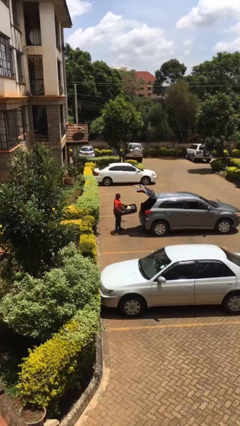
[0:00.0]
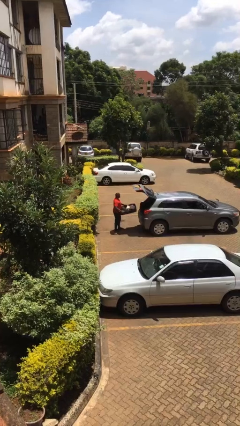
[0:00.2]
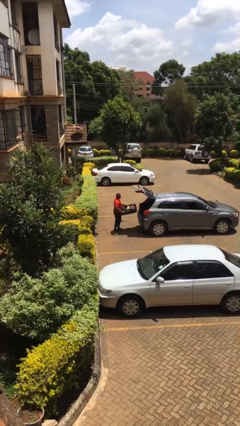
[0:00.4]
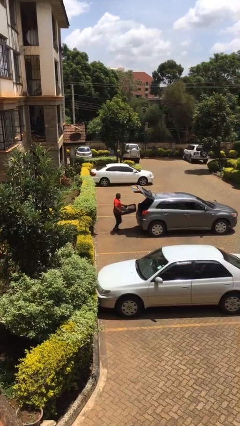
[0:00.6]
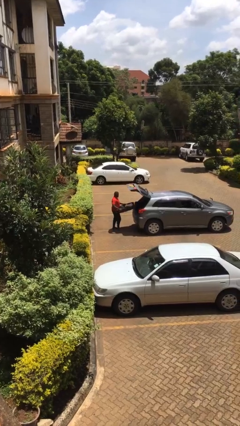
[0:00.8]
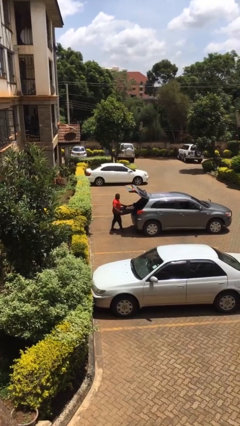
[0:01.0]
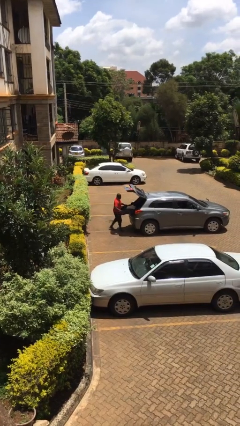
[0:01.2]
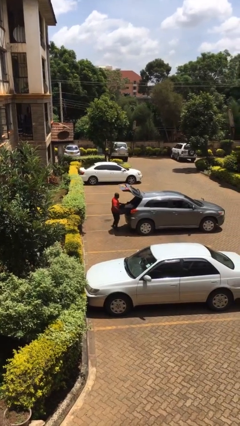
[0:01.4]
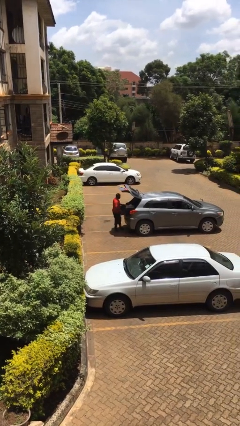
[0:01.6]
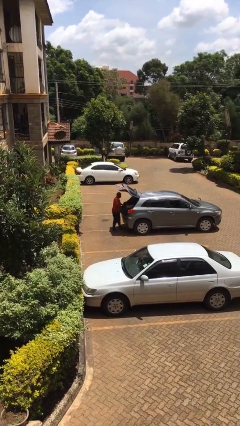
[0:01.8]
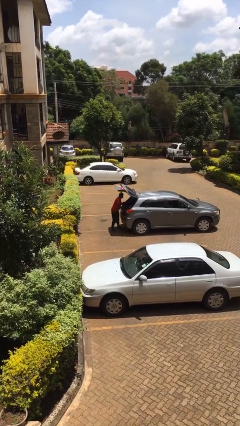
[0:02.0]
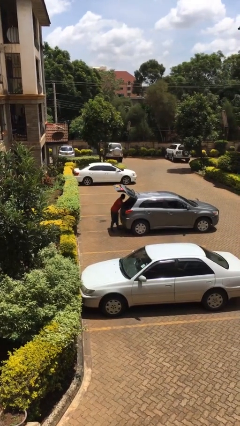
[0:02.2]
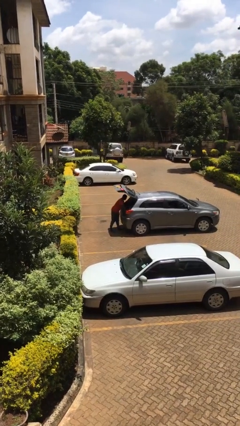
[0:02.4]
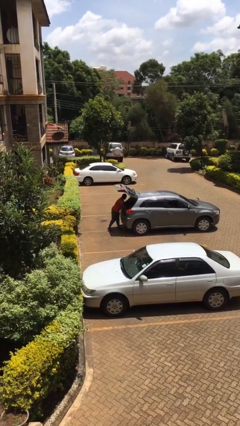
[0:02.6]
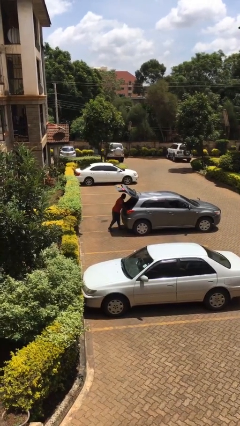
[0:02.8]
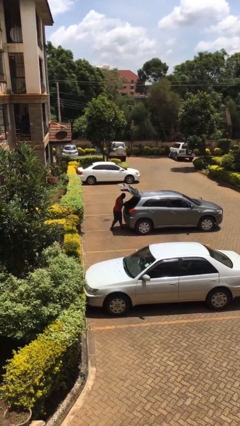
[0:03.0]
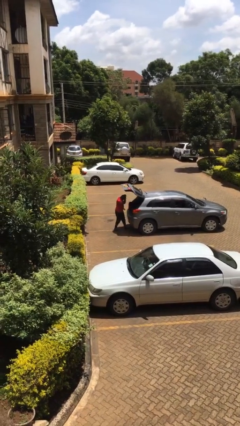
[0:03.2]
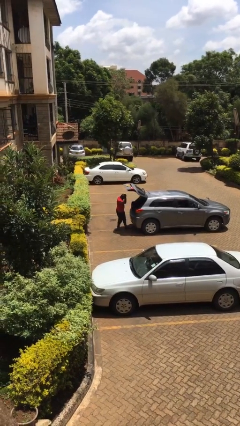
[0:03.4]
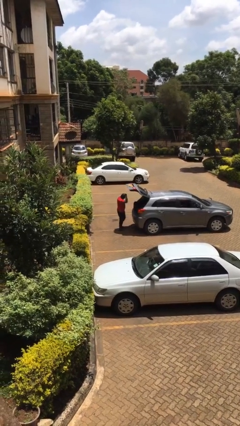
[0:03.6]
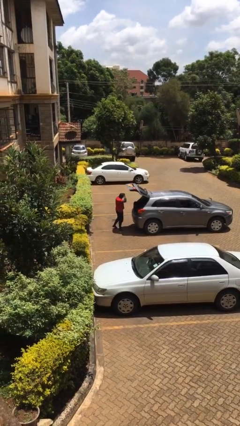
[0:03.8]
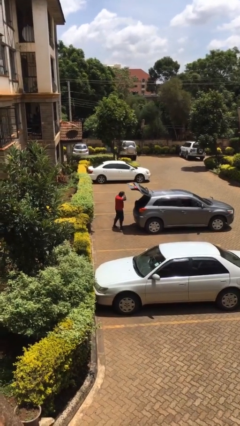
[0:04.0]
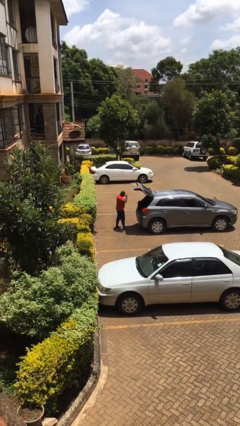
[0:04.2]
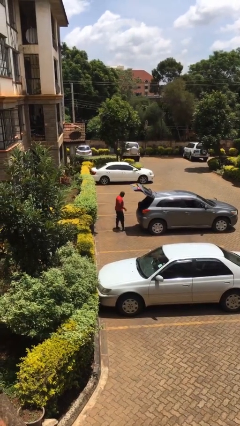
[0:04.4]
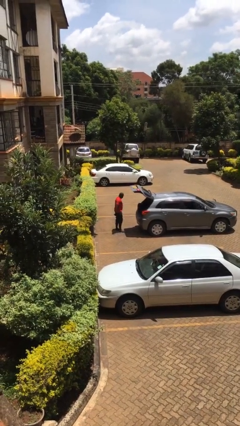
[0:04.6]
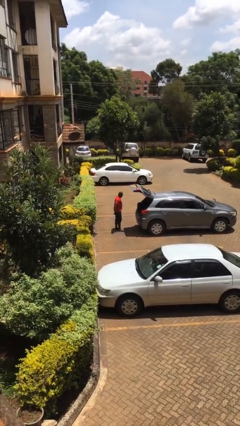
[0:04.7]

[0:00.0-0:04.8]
person loads car

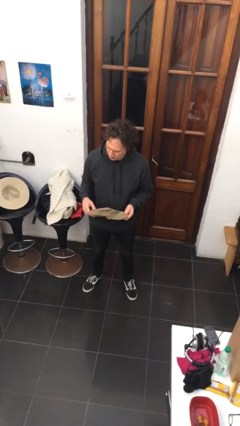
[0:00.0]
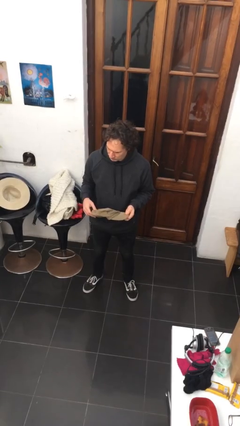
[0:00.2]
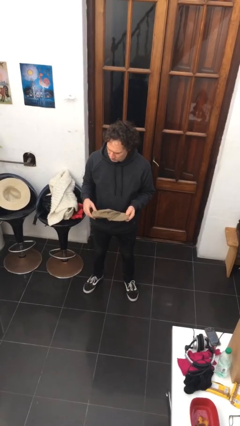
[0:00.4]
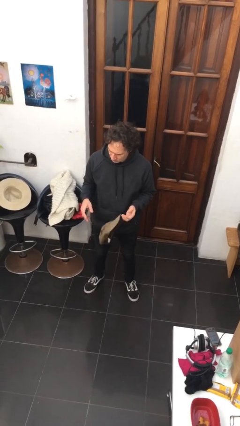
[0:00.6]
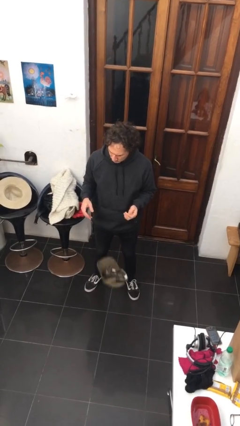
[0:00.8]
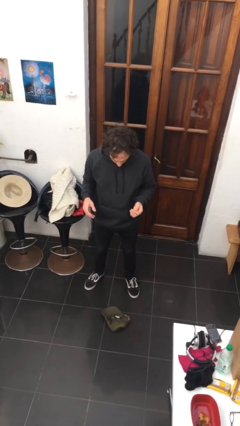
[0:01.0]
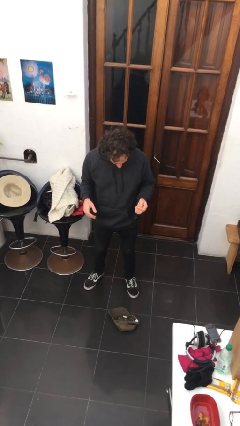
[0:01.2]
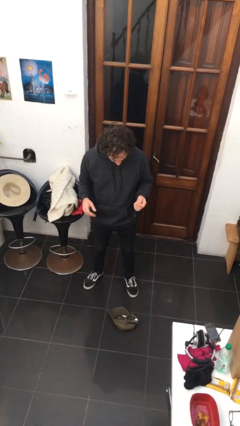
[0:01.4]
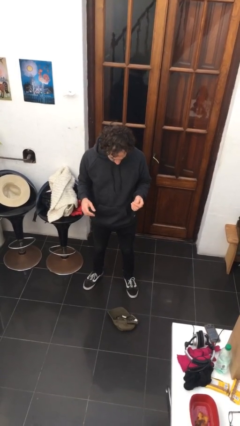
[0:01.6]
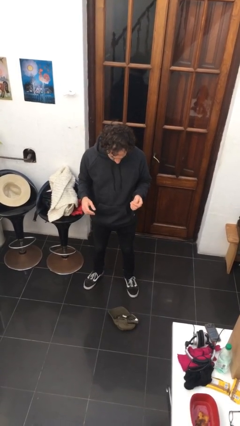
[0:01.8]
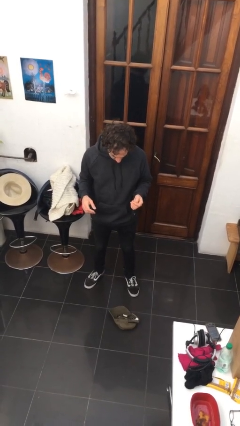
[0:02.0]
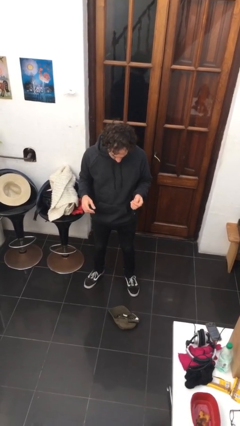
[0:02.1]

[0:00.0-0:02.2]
person drops object

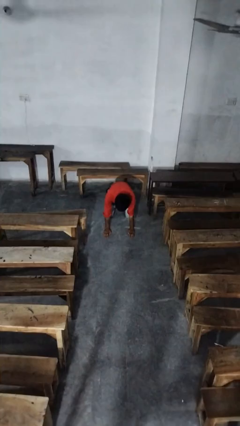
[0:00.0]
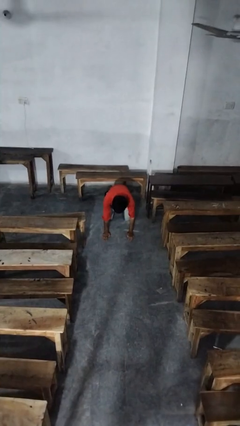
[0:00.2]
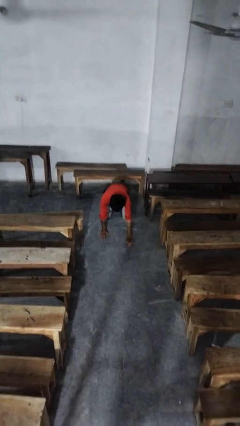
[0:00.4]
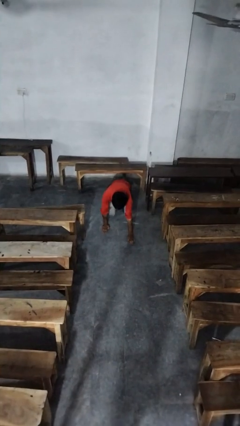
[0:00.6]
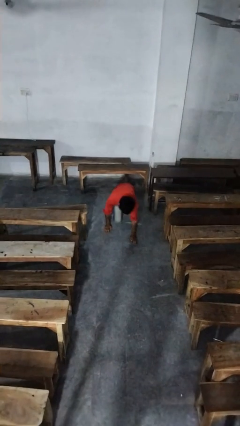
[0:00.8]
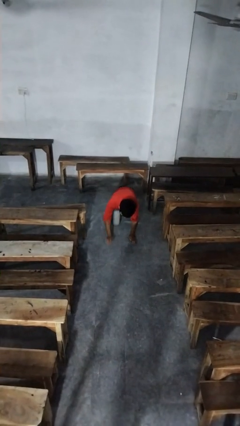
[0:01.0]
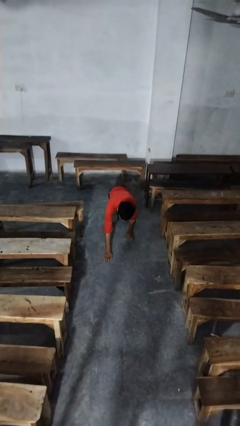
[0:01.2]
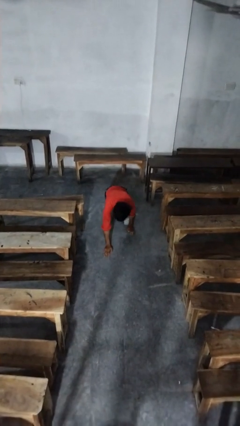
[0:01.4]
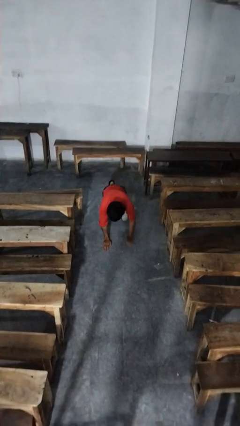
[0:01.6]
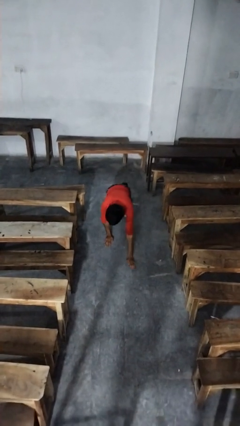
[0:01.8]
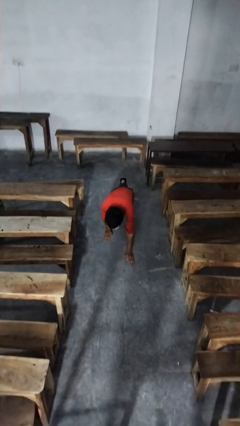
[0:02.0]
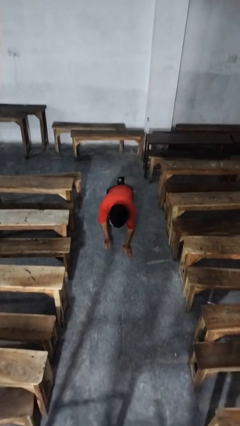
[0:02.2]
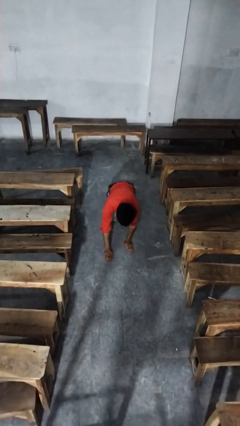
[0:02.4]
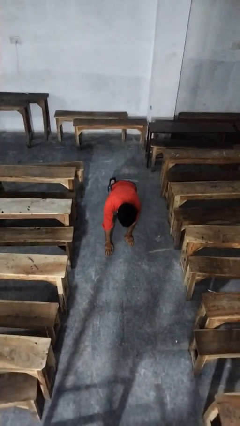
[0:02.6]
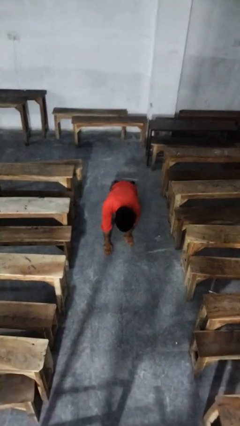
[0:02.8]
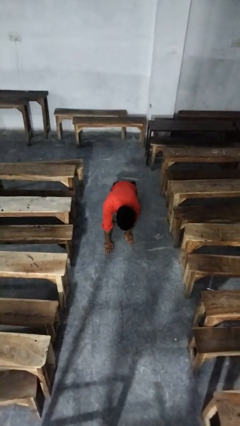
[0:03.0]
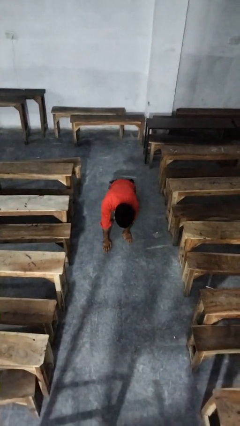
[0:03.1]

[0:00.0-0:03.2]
person crawls

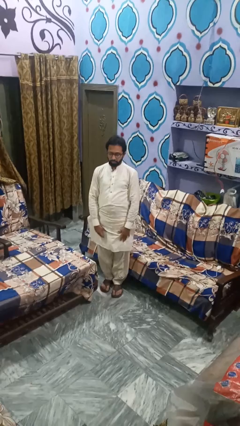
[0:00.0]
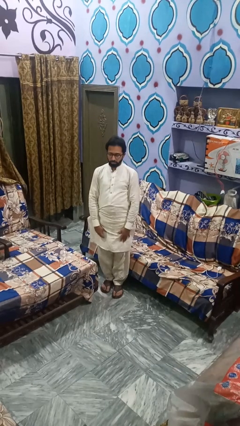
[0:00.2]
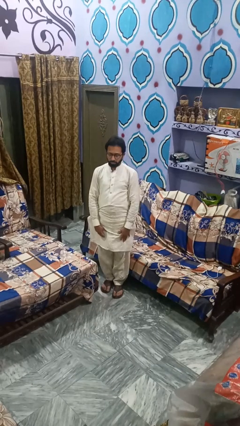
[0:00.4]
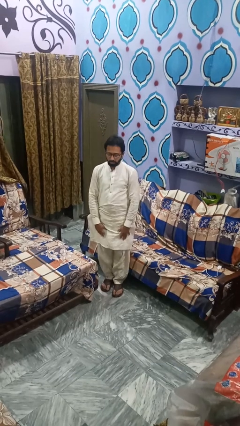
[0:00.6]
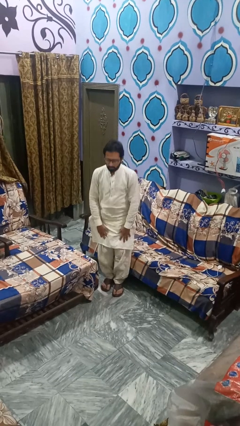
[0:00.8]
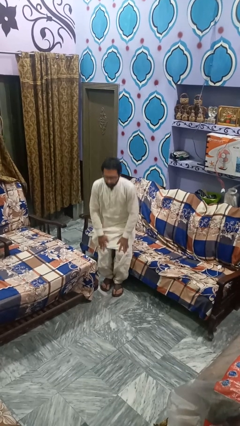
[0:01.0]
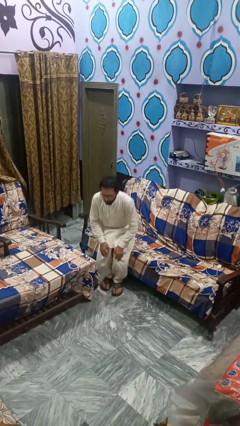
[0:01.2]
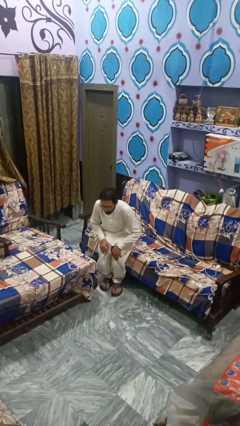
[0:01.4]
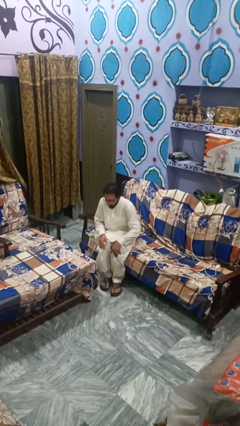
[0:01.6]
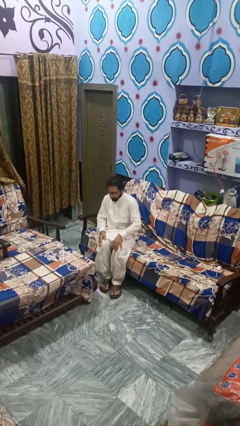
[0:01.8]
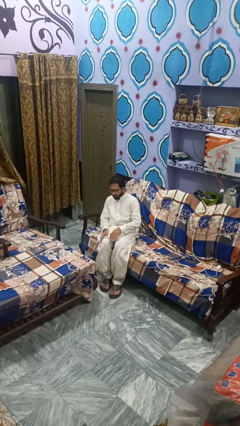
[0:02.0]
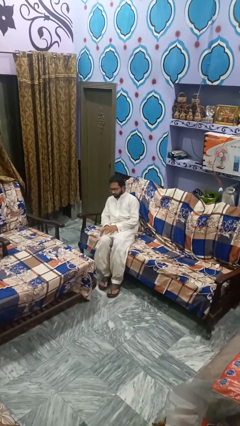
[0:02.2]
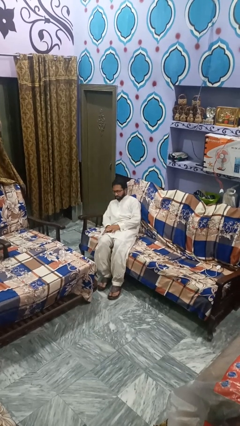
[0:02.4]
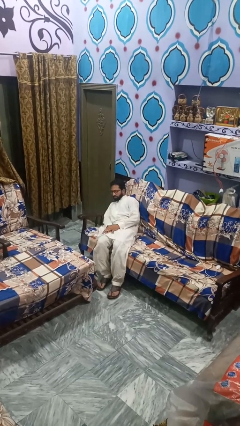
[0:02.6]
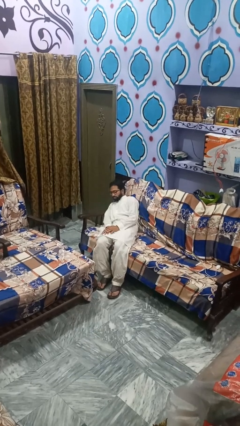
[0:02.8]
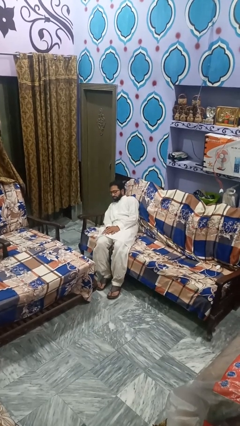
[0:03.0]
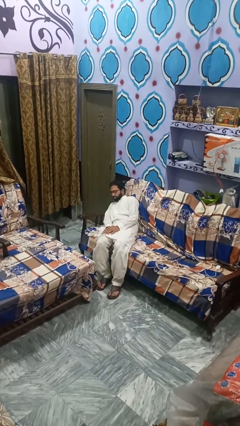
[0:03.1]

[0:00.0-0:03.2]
person lies down on couch

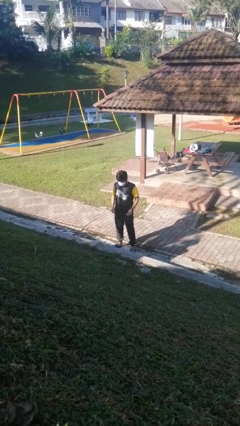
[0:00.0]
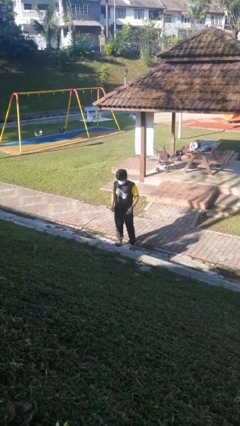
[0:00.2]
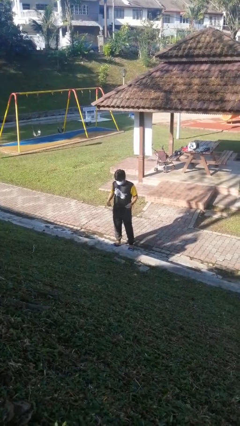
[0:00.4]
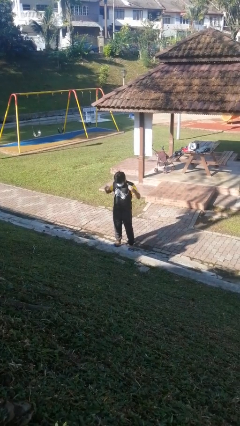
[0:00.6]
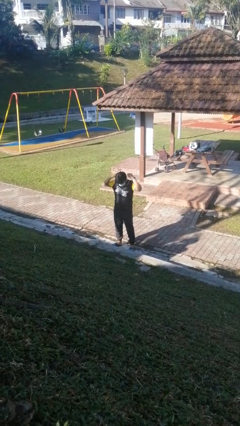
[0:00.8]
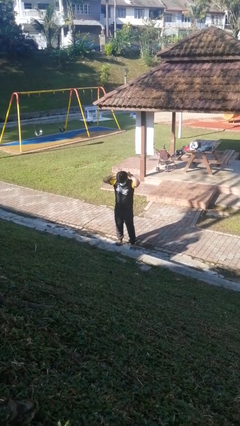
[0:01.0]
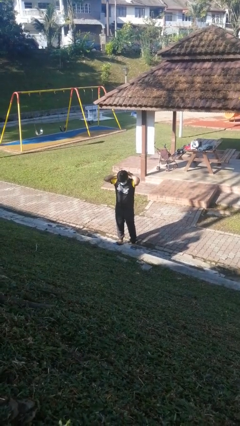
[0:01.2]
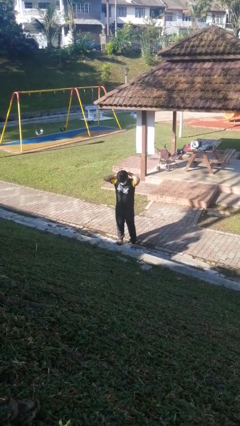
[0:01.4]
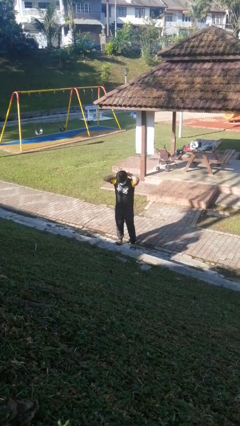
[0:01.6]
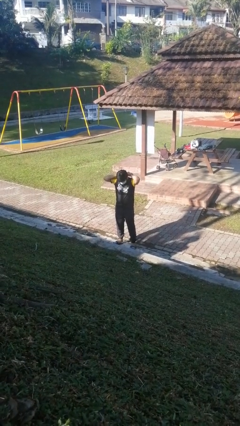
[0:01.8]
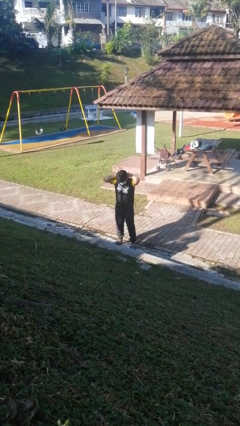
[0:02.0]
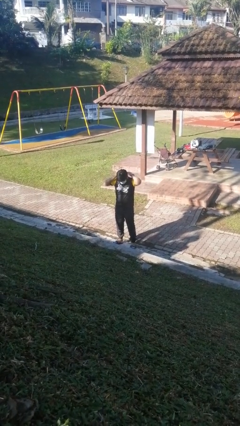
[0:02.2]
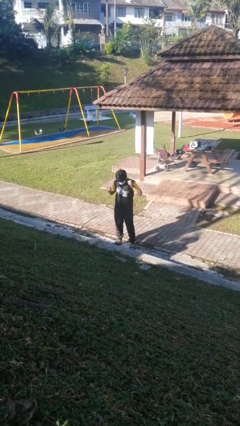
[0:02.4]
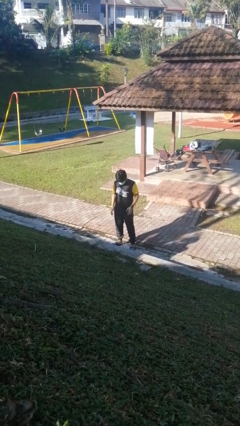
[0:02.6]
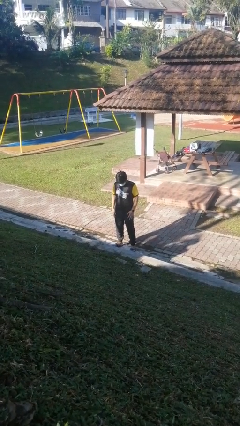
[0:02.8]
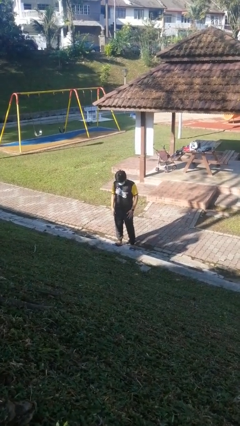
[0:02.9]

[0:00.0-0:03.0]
person puts on necklace

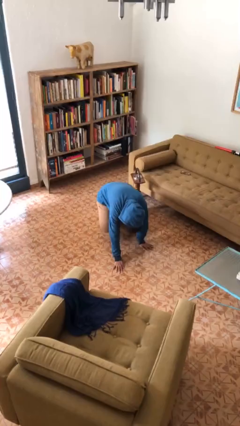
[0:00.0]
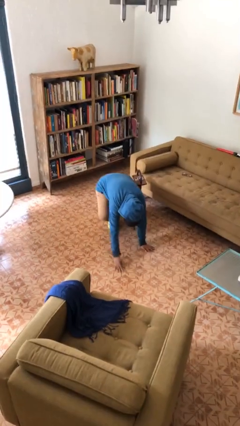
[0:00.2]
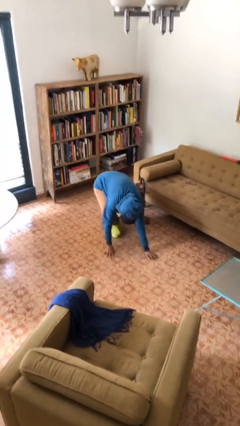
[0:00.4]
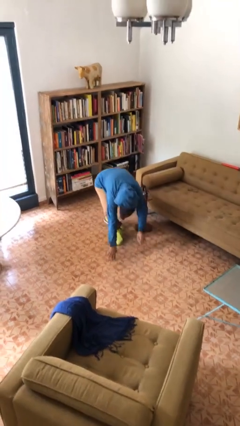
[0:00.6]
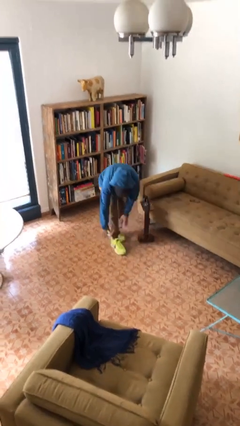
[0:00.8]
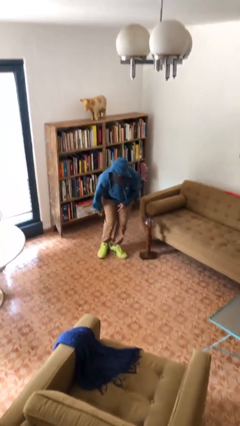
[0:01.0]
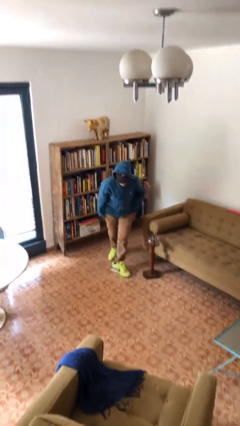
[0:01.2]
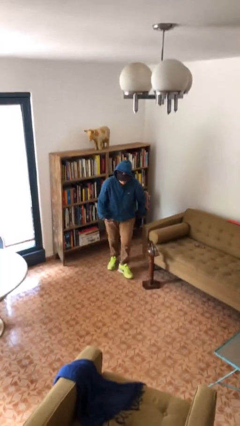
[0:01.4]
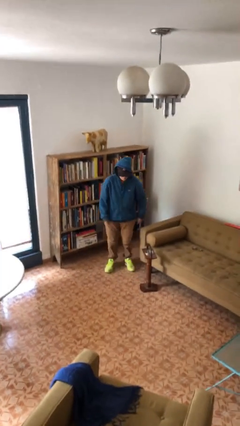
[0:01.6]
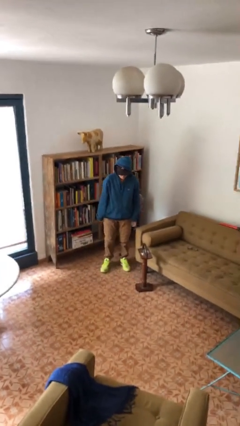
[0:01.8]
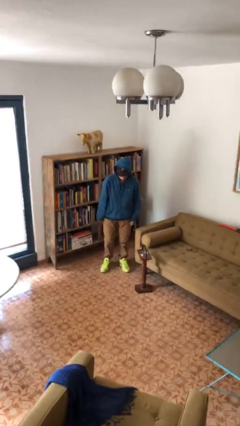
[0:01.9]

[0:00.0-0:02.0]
person stands up from floor
